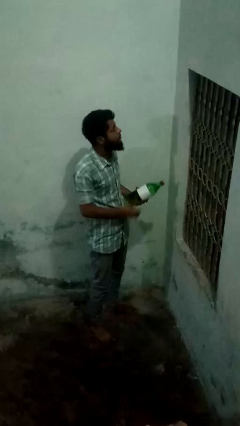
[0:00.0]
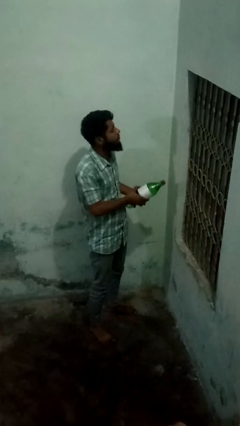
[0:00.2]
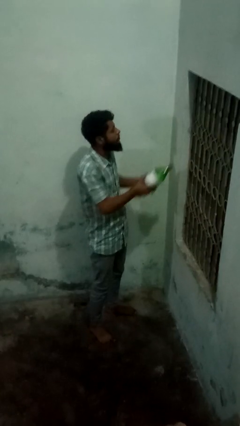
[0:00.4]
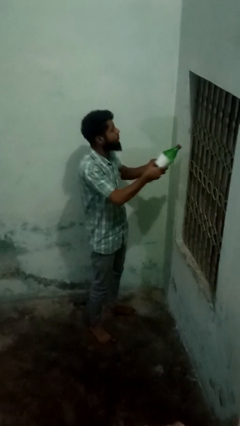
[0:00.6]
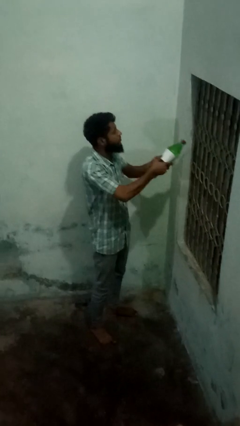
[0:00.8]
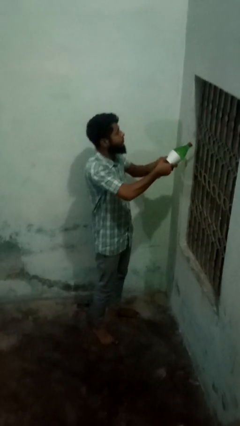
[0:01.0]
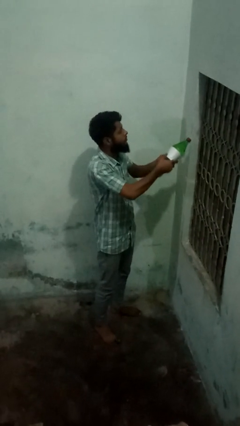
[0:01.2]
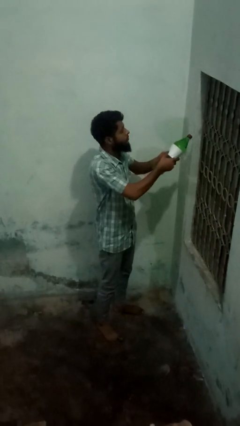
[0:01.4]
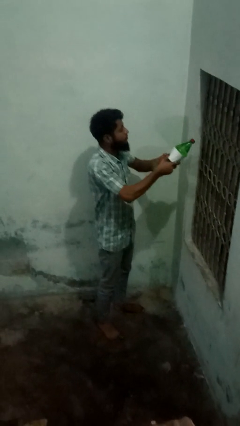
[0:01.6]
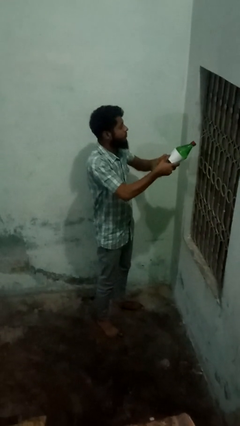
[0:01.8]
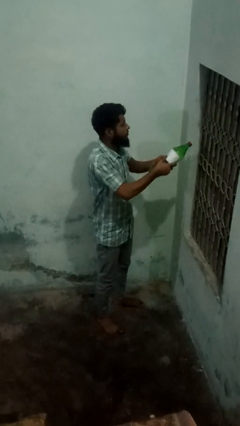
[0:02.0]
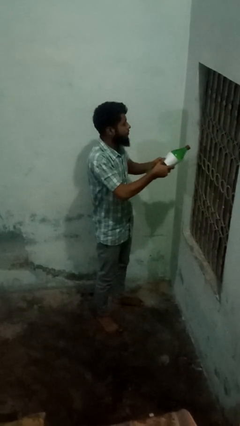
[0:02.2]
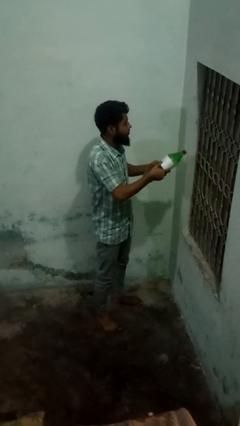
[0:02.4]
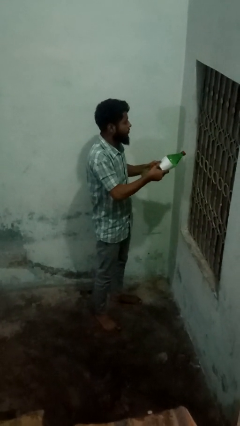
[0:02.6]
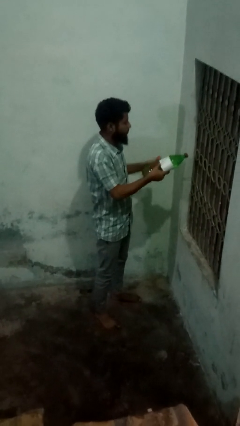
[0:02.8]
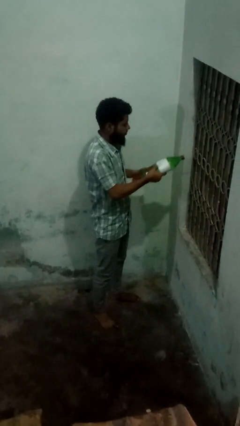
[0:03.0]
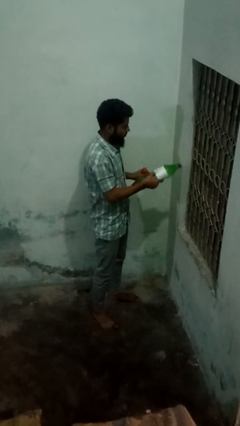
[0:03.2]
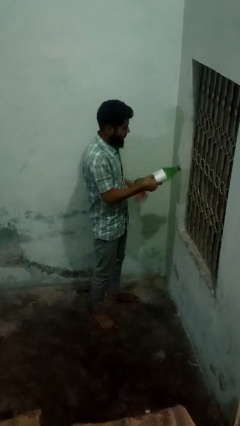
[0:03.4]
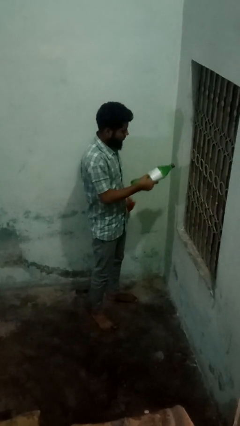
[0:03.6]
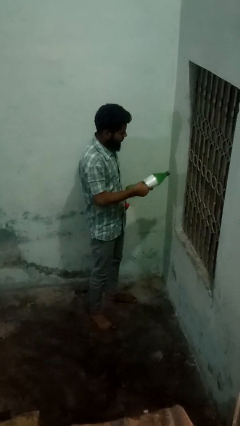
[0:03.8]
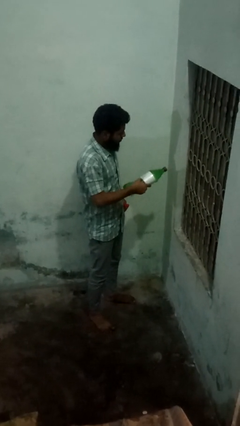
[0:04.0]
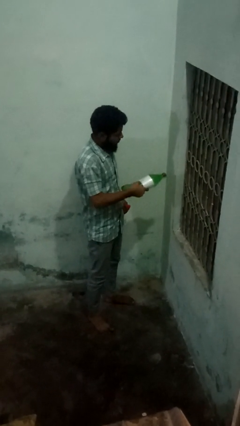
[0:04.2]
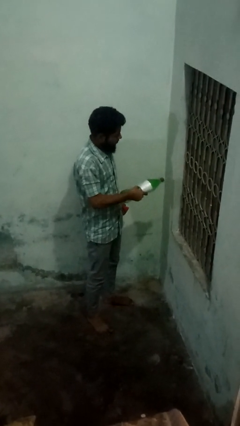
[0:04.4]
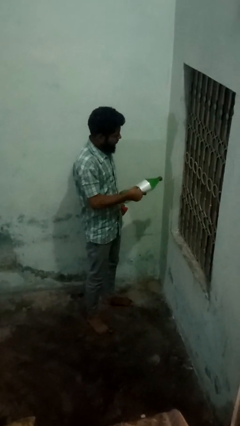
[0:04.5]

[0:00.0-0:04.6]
person sprays from bottle

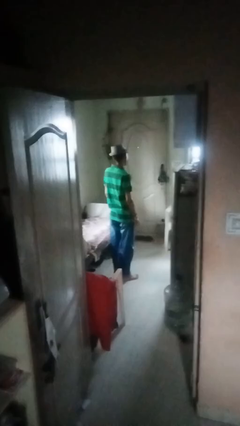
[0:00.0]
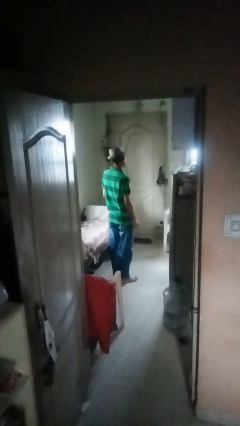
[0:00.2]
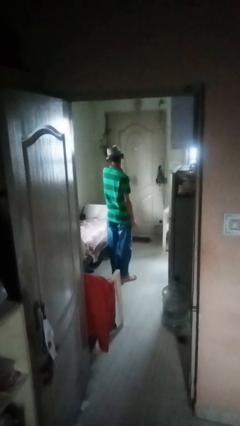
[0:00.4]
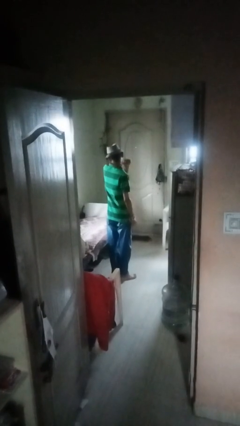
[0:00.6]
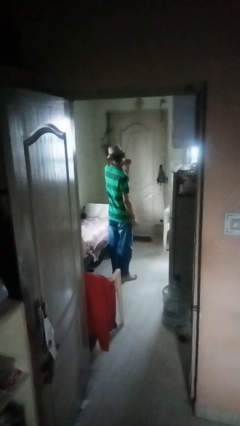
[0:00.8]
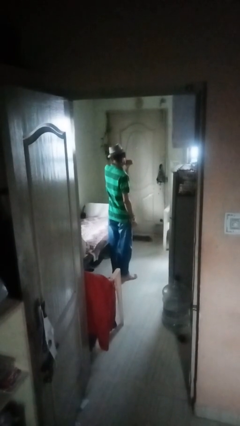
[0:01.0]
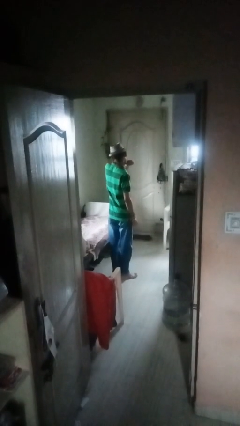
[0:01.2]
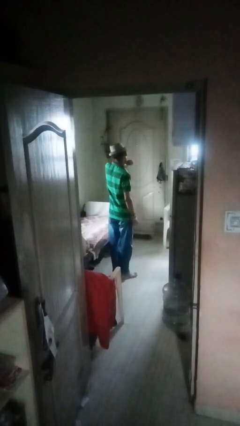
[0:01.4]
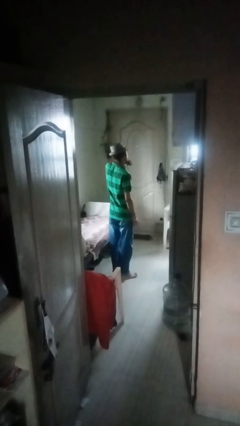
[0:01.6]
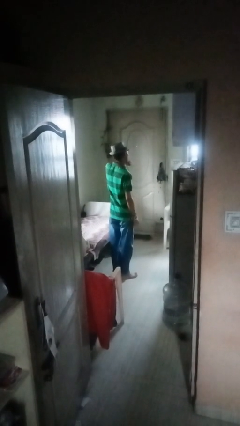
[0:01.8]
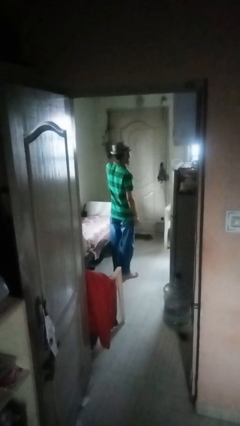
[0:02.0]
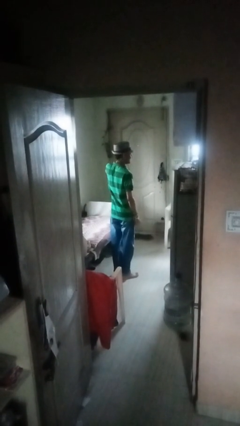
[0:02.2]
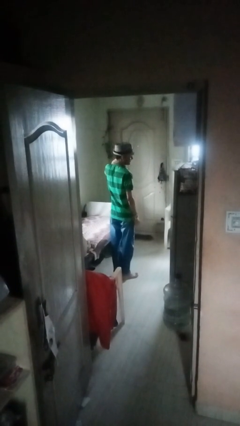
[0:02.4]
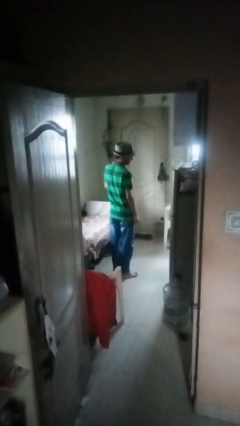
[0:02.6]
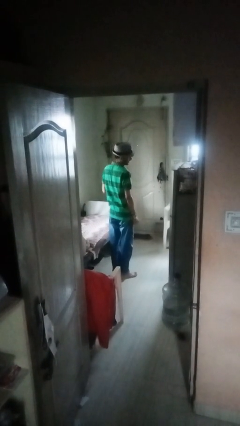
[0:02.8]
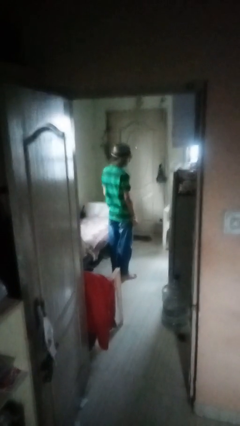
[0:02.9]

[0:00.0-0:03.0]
person gestures cut

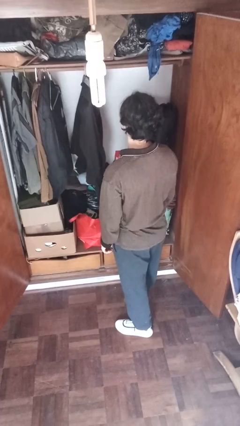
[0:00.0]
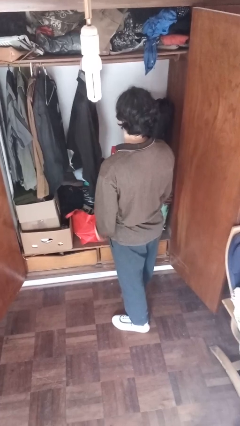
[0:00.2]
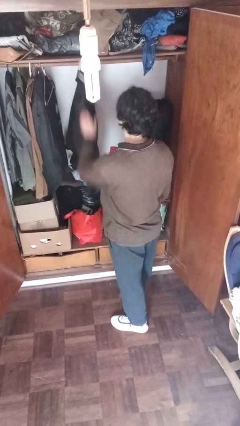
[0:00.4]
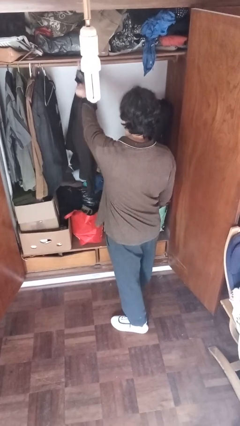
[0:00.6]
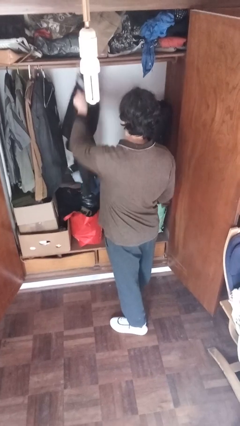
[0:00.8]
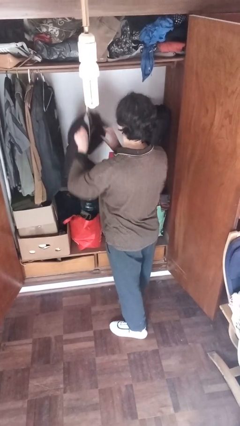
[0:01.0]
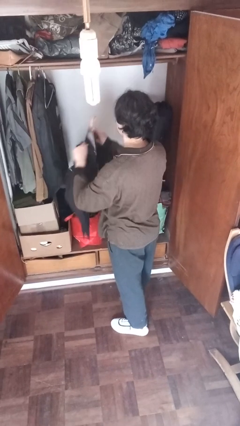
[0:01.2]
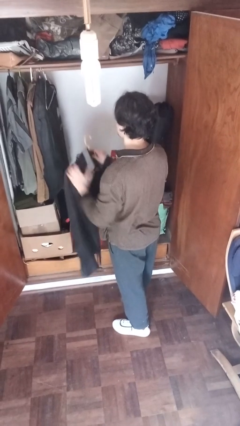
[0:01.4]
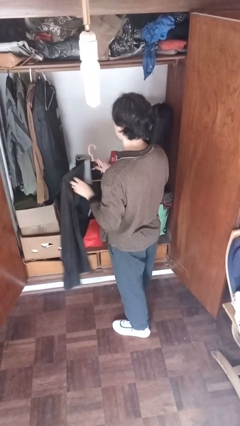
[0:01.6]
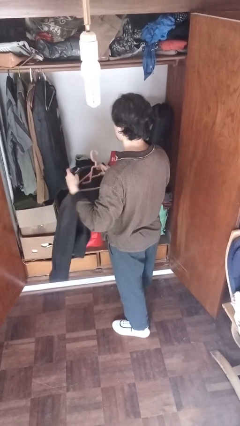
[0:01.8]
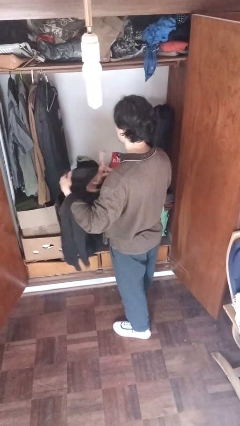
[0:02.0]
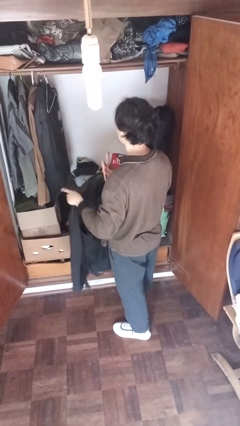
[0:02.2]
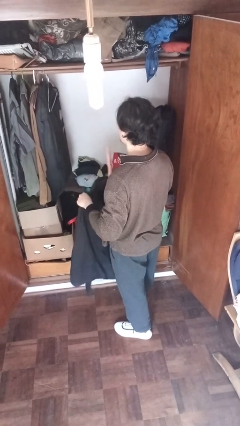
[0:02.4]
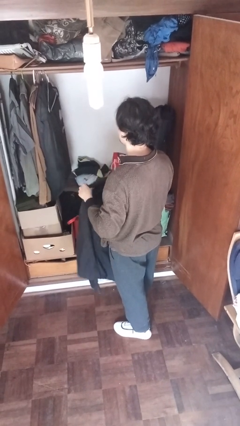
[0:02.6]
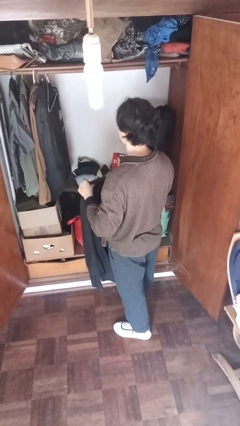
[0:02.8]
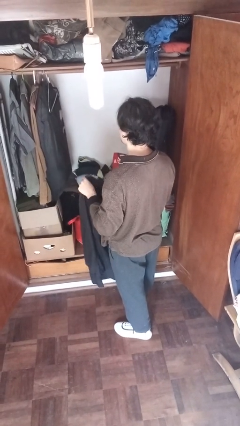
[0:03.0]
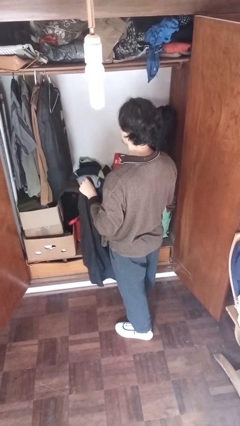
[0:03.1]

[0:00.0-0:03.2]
person takes clothes from closet

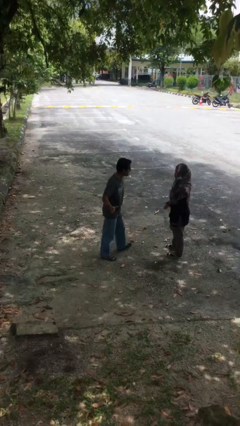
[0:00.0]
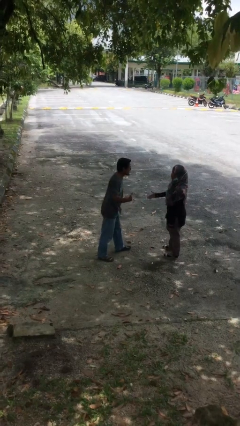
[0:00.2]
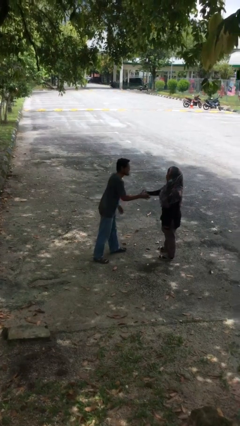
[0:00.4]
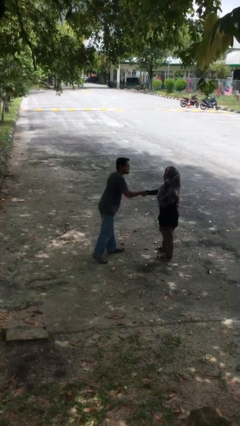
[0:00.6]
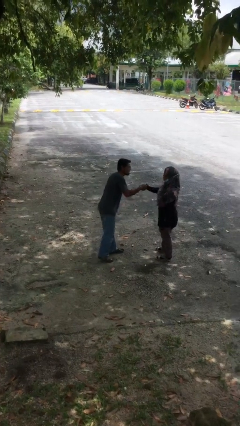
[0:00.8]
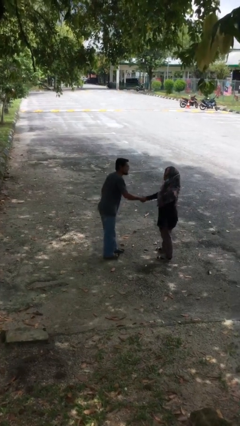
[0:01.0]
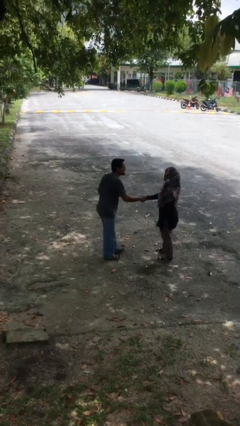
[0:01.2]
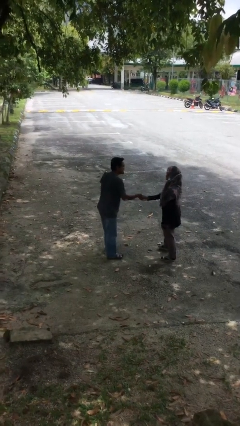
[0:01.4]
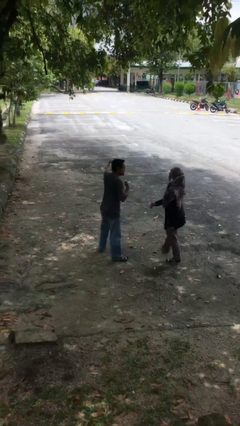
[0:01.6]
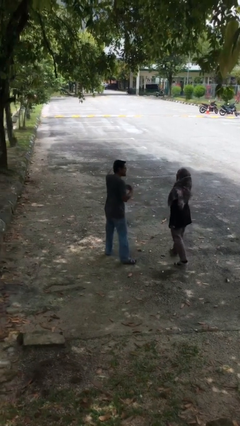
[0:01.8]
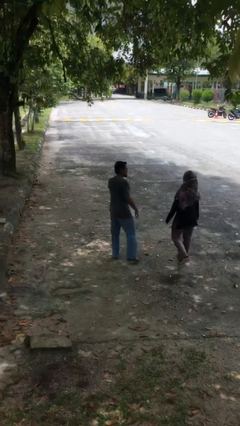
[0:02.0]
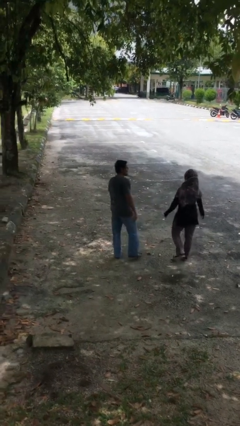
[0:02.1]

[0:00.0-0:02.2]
person shakes hand

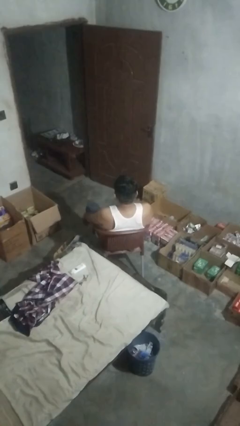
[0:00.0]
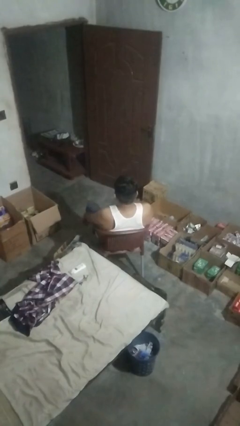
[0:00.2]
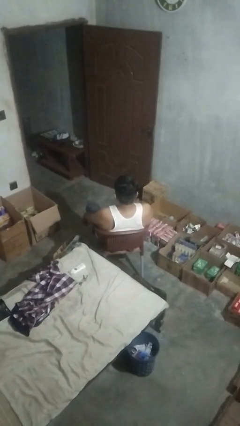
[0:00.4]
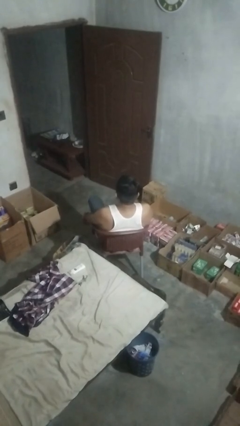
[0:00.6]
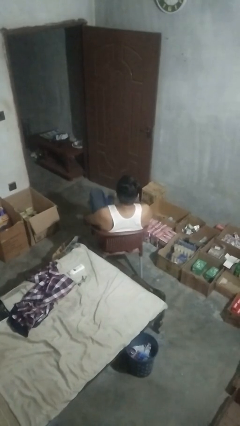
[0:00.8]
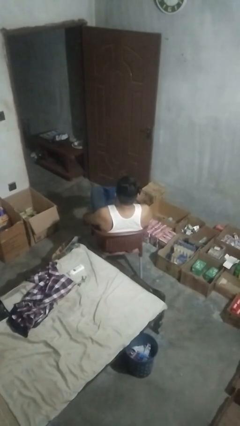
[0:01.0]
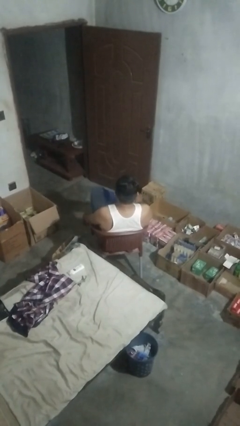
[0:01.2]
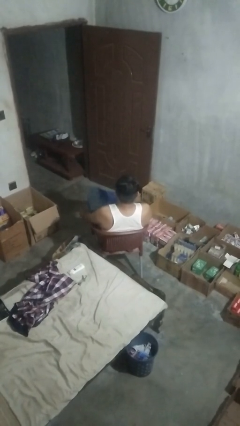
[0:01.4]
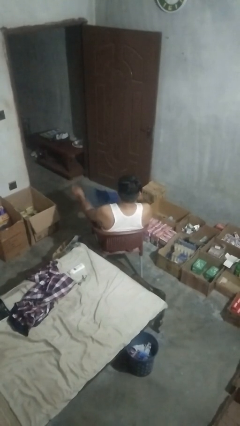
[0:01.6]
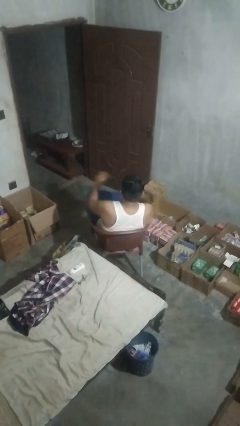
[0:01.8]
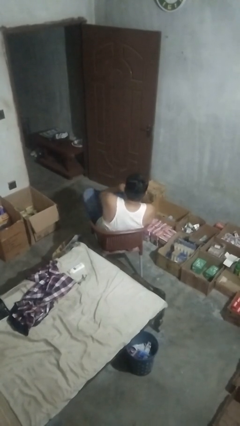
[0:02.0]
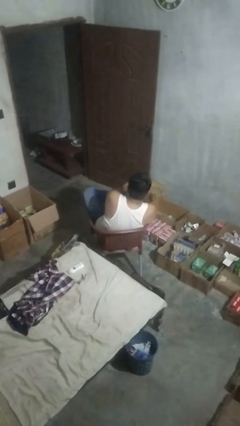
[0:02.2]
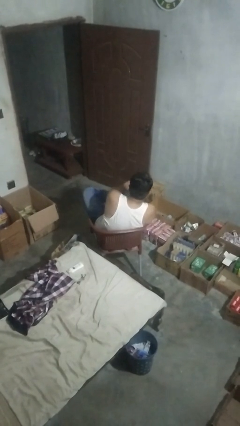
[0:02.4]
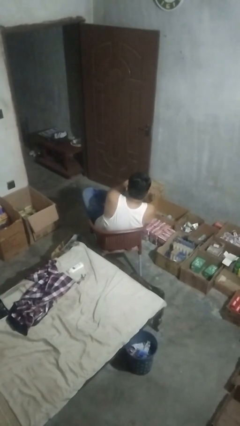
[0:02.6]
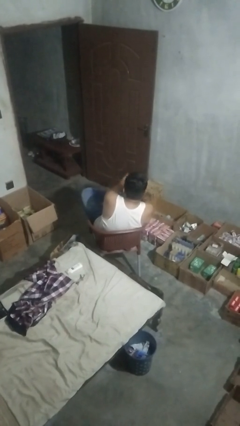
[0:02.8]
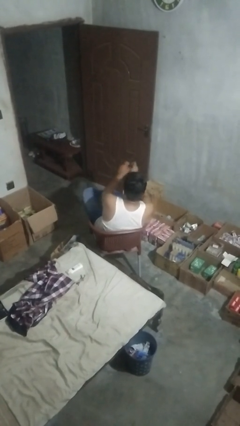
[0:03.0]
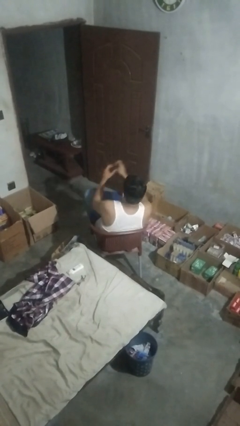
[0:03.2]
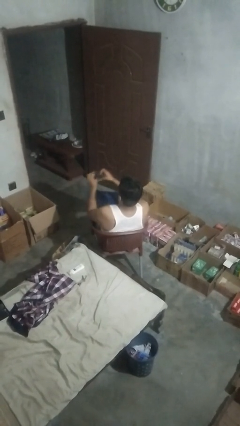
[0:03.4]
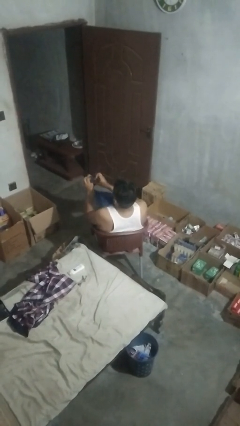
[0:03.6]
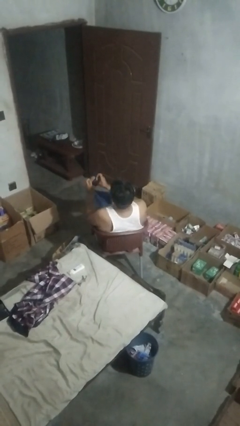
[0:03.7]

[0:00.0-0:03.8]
person takes off socks

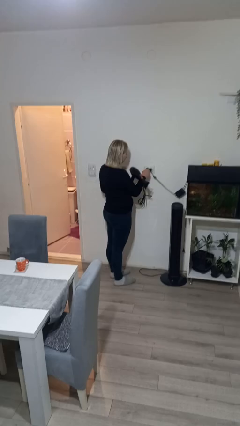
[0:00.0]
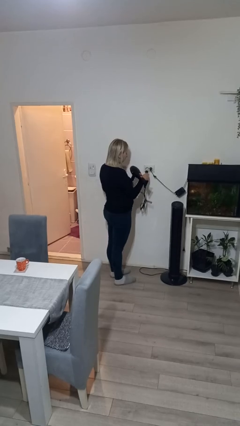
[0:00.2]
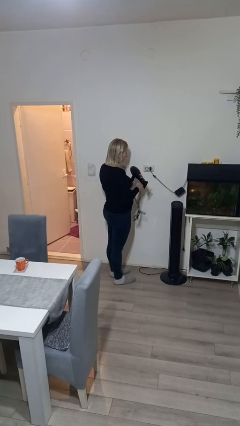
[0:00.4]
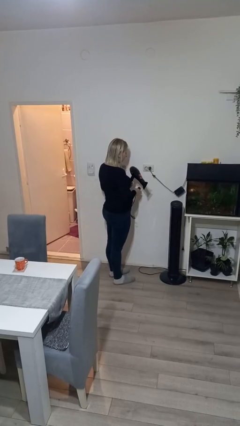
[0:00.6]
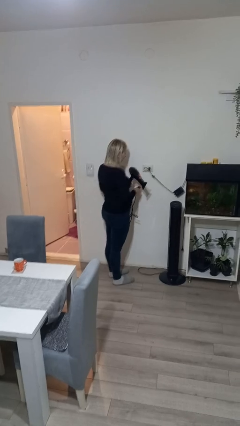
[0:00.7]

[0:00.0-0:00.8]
person unplugs from electrical socket
